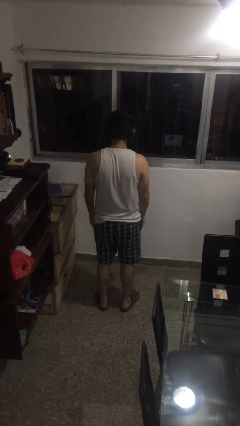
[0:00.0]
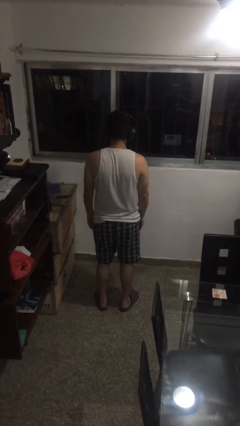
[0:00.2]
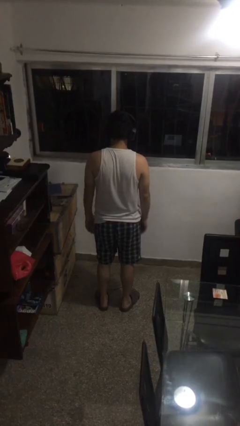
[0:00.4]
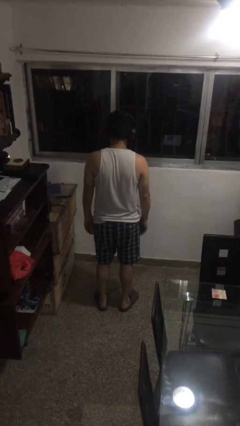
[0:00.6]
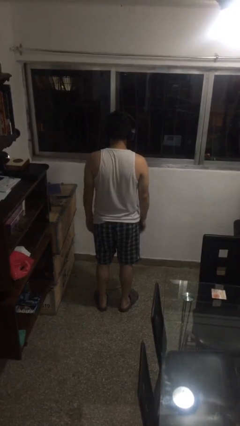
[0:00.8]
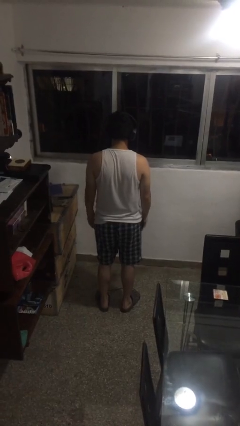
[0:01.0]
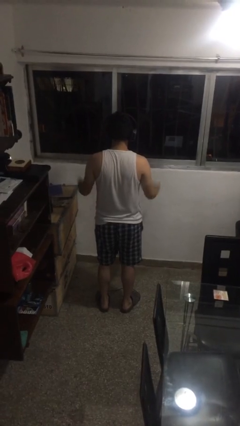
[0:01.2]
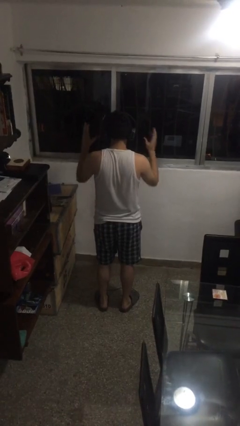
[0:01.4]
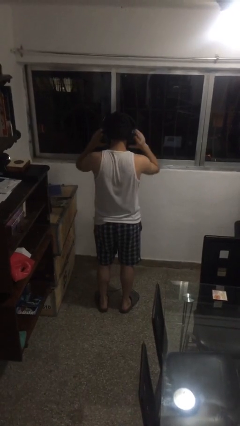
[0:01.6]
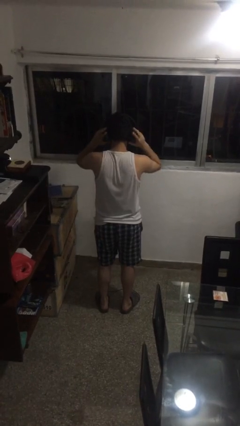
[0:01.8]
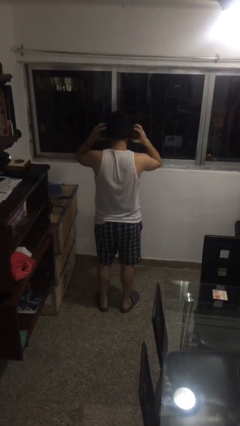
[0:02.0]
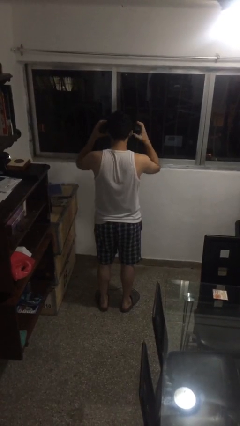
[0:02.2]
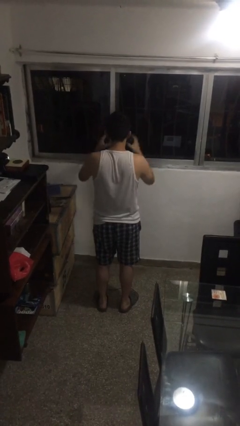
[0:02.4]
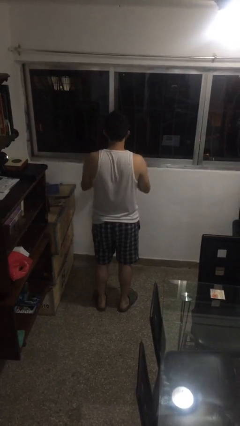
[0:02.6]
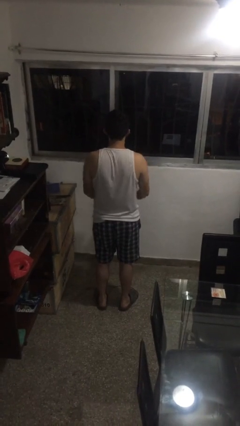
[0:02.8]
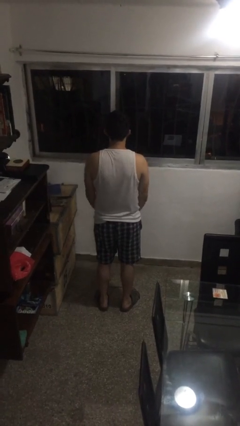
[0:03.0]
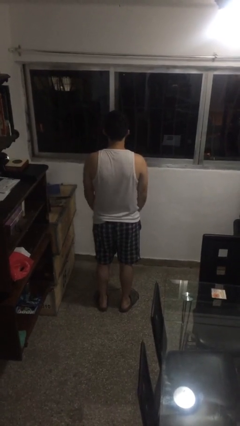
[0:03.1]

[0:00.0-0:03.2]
person takes off headphones

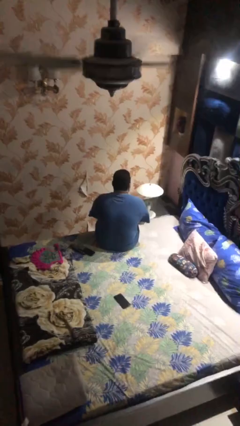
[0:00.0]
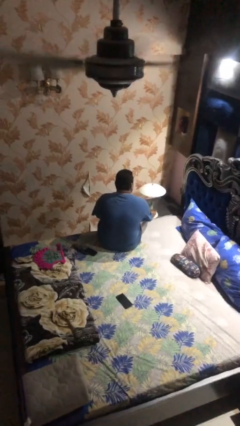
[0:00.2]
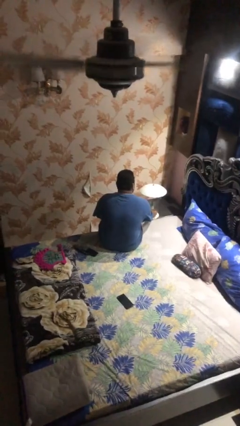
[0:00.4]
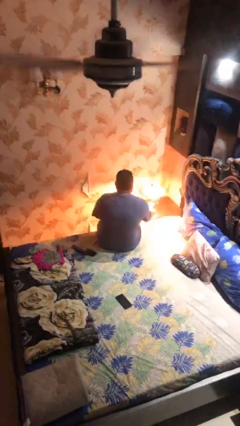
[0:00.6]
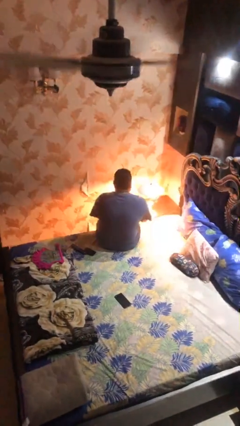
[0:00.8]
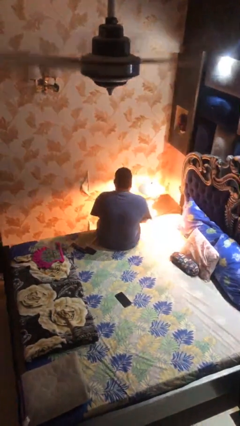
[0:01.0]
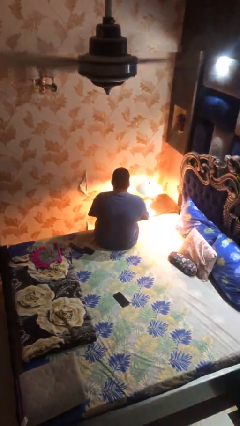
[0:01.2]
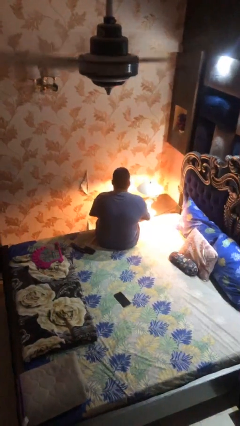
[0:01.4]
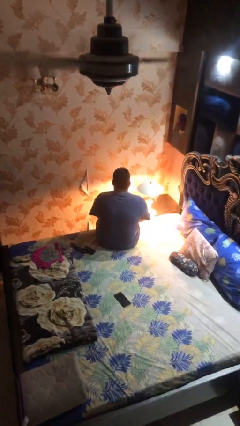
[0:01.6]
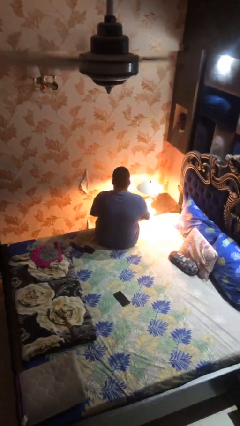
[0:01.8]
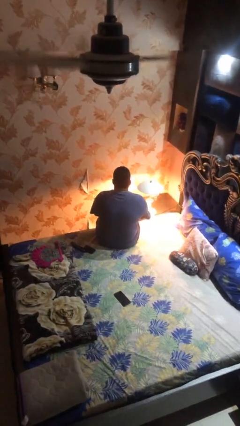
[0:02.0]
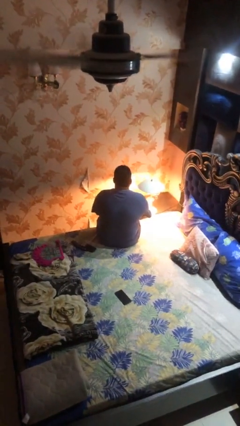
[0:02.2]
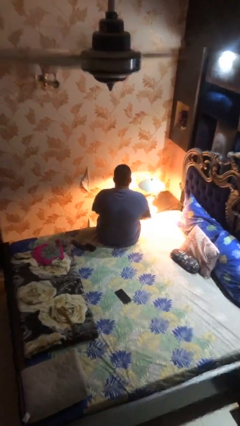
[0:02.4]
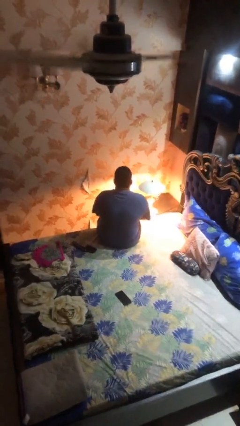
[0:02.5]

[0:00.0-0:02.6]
person turns on lamp

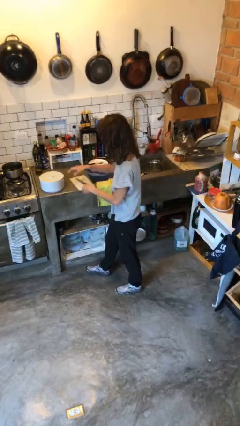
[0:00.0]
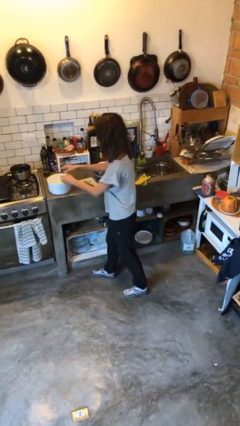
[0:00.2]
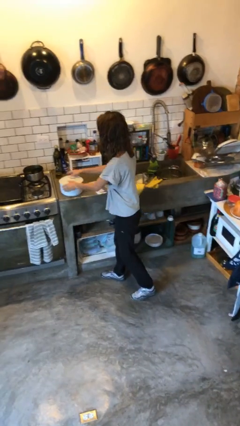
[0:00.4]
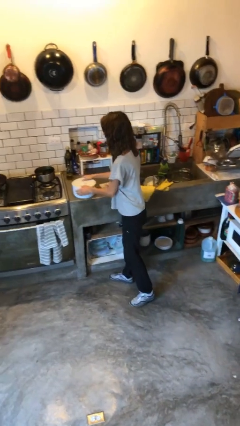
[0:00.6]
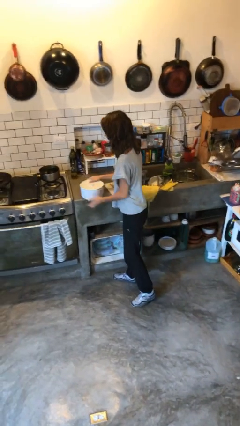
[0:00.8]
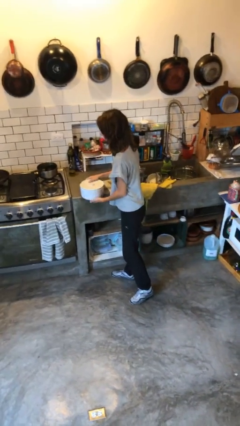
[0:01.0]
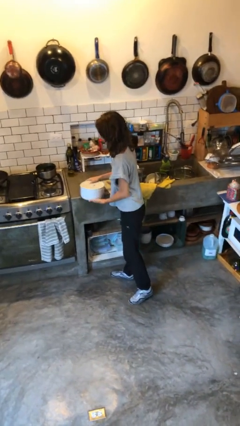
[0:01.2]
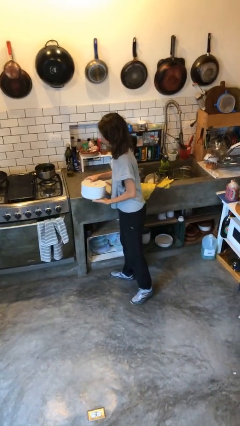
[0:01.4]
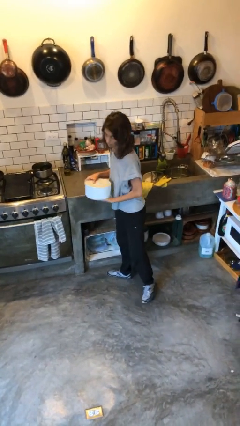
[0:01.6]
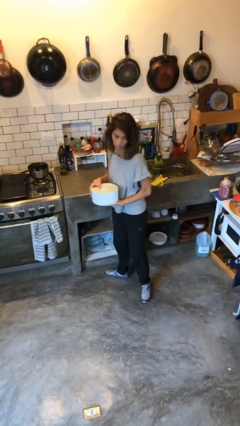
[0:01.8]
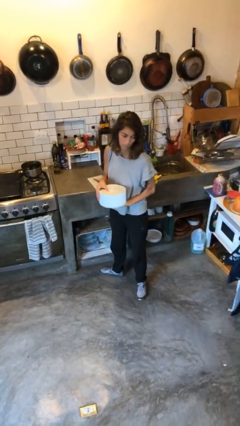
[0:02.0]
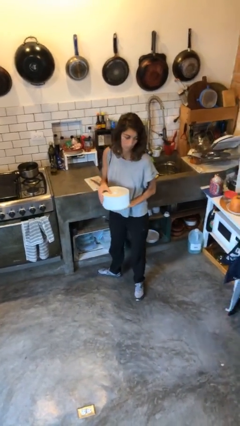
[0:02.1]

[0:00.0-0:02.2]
person picks up object from countertop

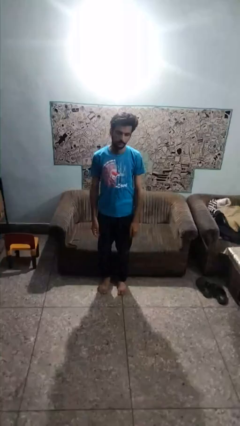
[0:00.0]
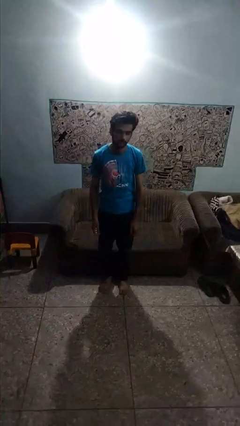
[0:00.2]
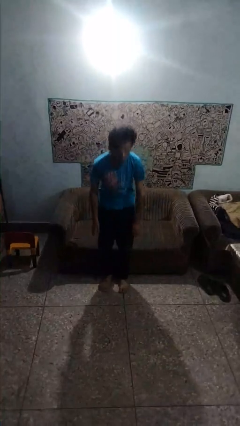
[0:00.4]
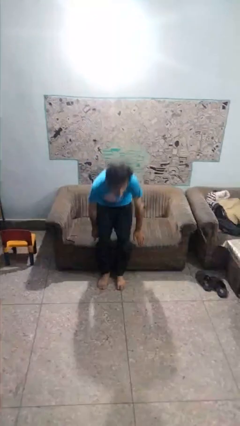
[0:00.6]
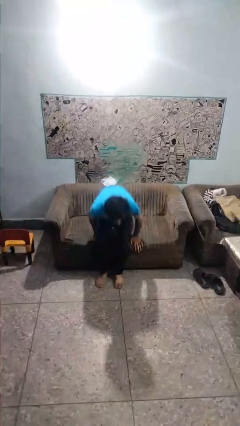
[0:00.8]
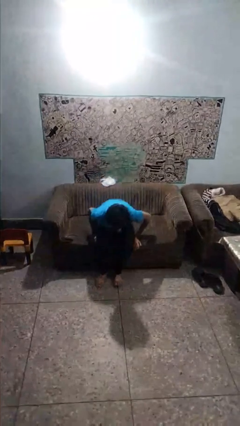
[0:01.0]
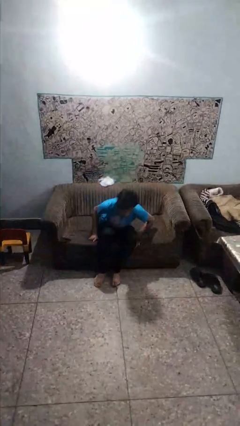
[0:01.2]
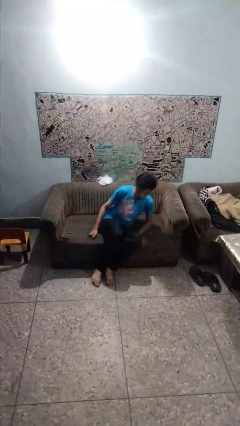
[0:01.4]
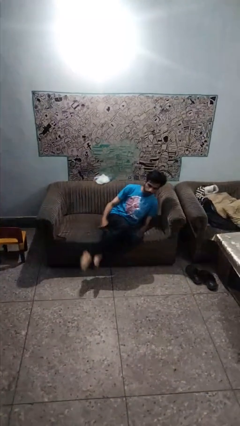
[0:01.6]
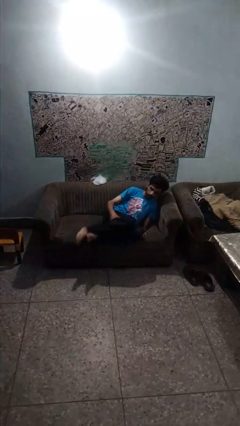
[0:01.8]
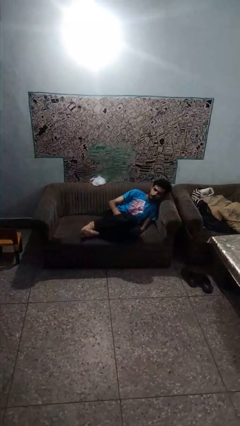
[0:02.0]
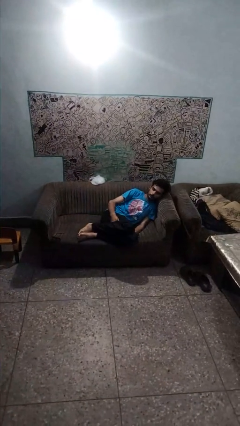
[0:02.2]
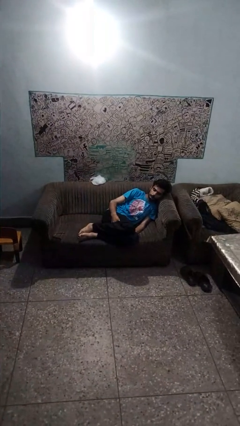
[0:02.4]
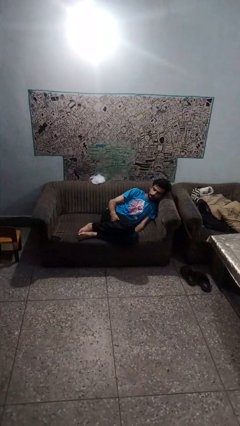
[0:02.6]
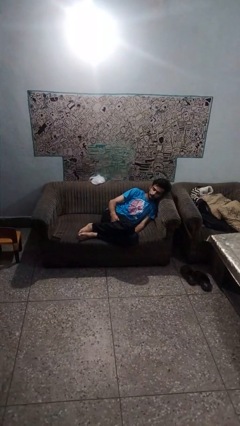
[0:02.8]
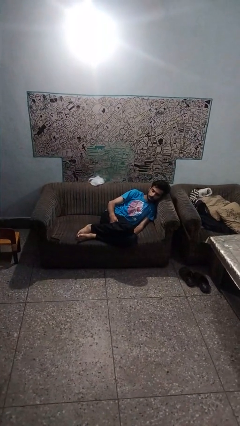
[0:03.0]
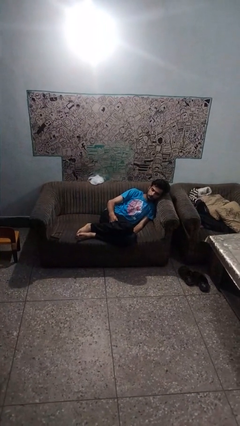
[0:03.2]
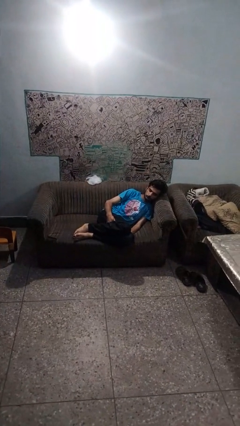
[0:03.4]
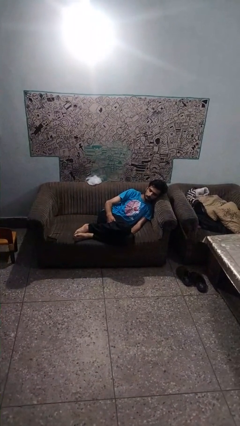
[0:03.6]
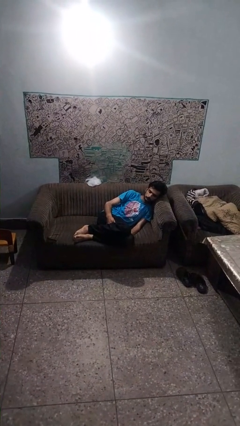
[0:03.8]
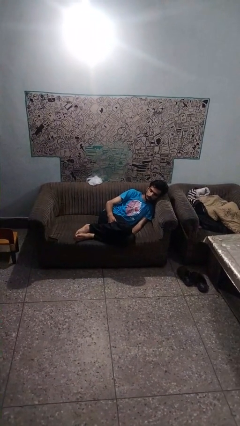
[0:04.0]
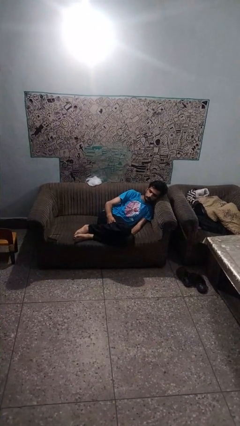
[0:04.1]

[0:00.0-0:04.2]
person lies down on couch

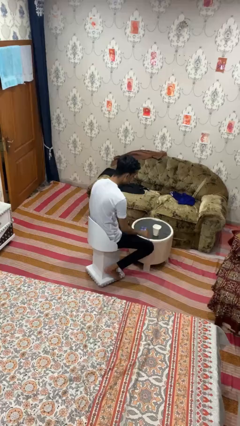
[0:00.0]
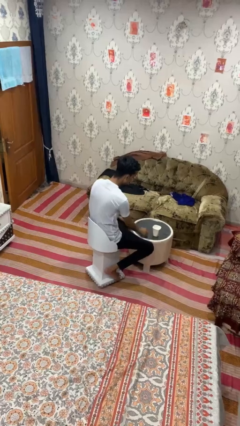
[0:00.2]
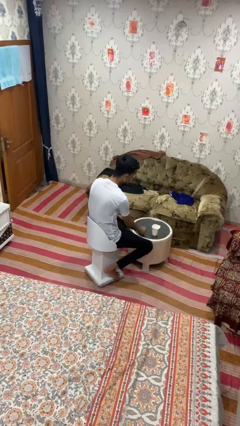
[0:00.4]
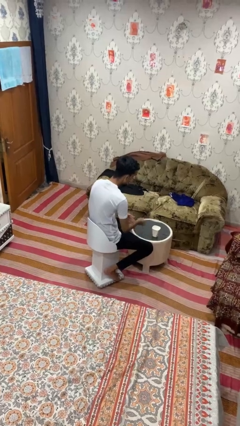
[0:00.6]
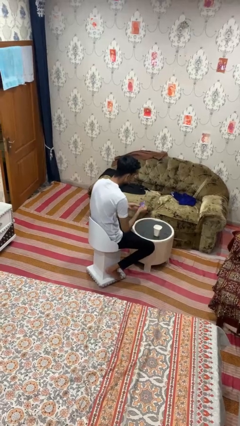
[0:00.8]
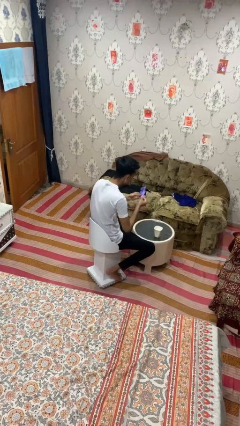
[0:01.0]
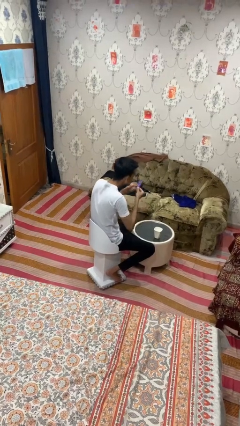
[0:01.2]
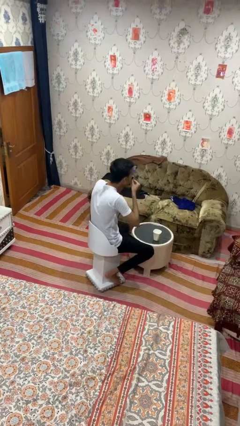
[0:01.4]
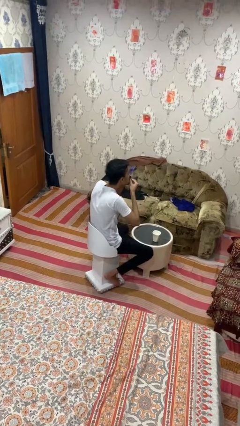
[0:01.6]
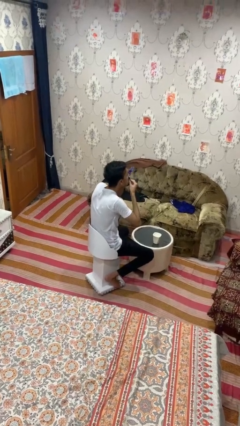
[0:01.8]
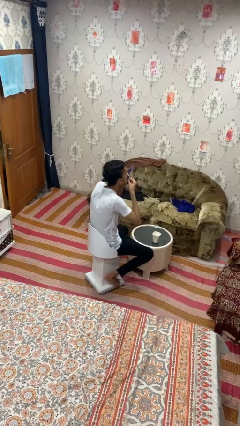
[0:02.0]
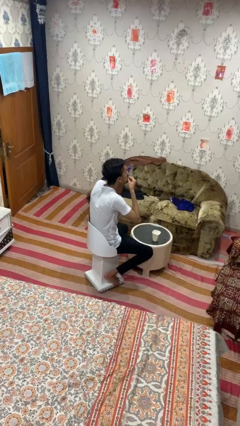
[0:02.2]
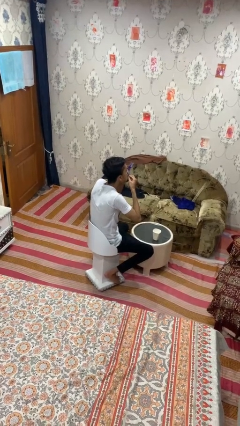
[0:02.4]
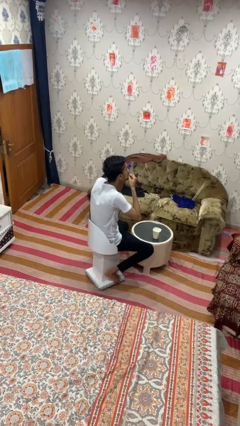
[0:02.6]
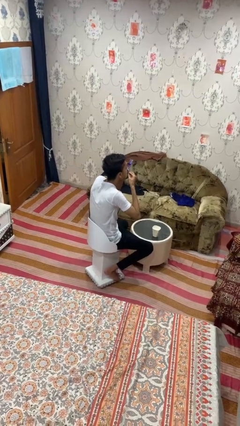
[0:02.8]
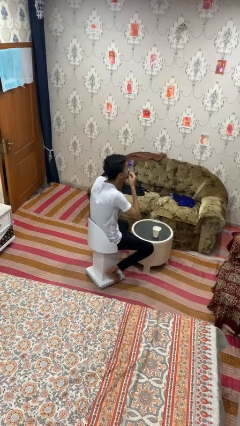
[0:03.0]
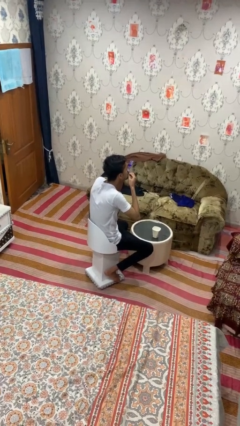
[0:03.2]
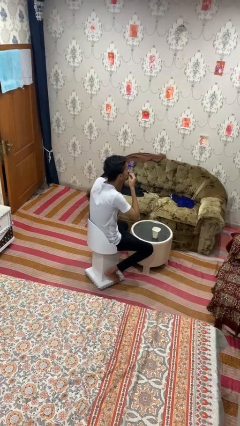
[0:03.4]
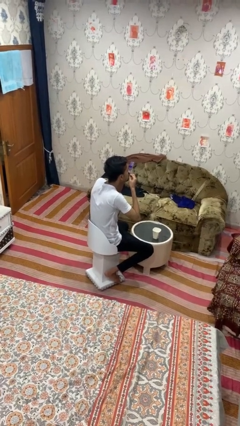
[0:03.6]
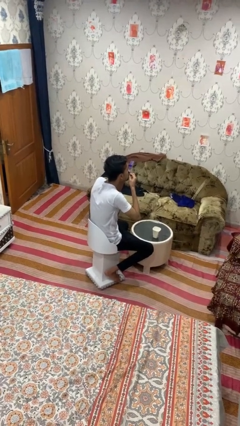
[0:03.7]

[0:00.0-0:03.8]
person takes medicine pills

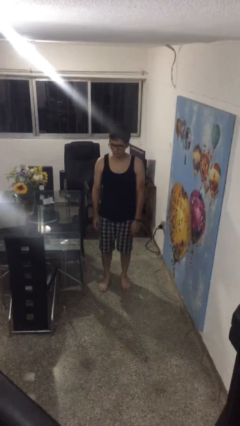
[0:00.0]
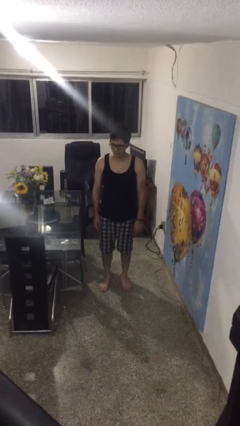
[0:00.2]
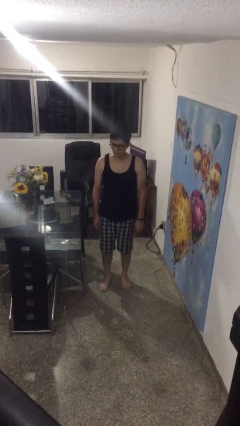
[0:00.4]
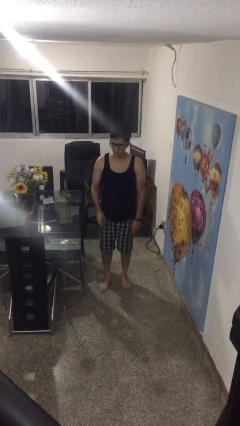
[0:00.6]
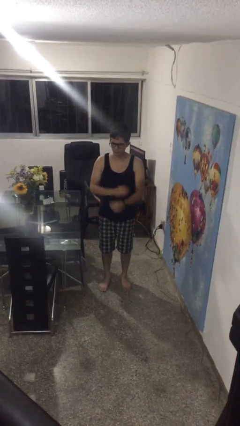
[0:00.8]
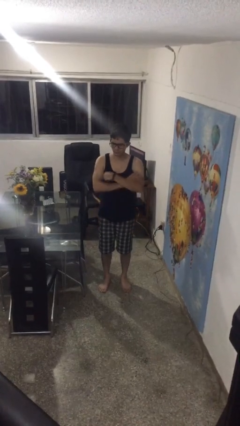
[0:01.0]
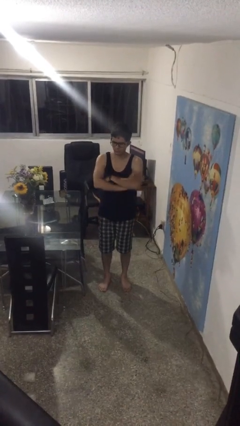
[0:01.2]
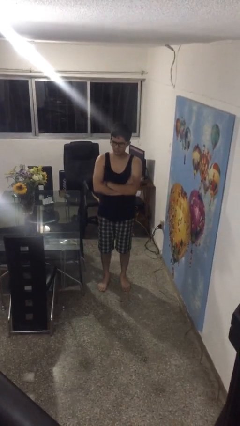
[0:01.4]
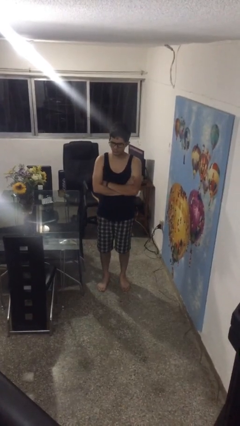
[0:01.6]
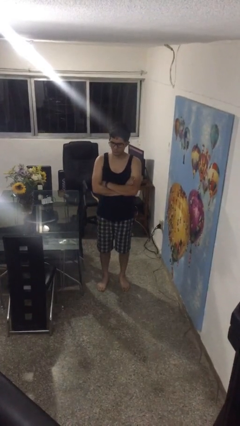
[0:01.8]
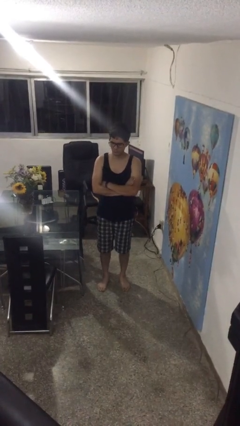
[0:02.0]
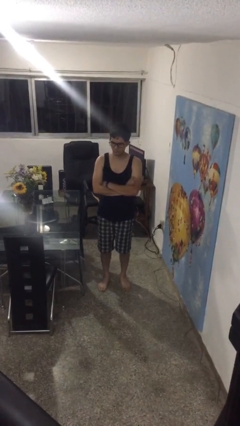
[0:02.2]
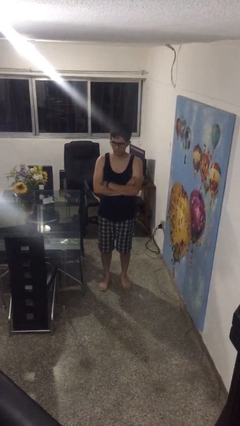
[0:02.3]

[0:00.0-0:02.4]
person crosses arms
